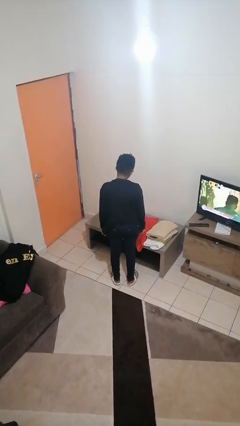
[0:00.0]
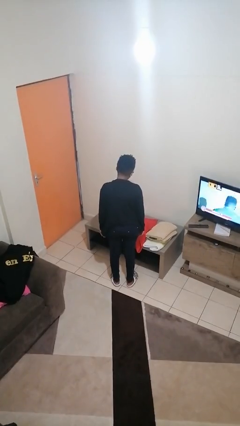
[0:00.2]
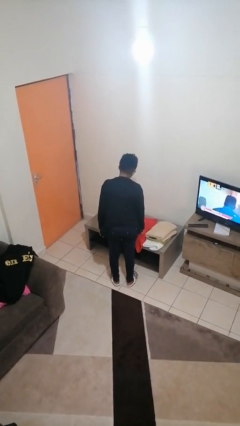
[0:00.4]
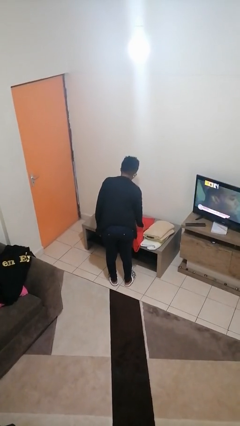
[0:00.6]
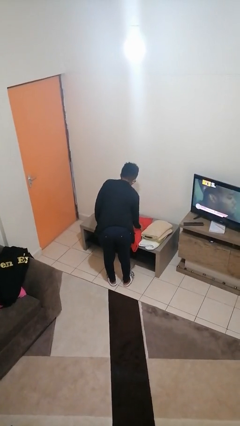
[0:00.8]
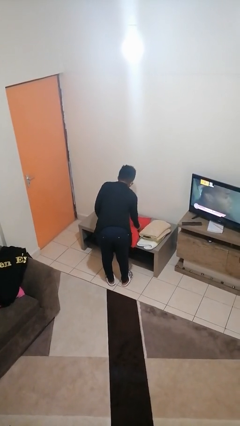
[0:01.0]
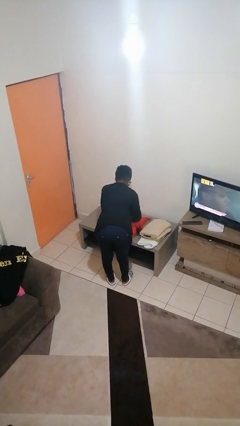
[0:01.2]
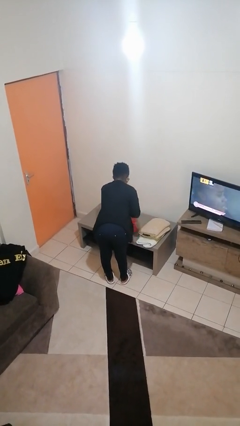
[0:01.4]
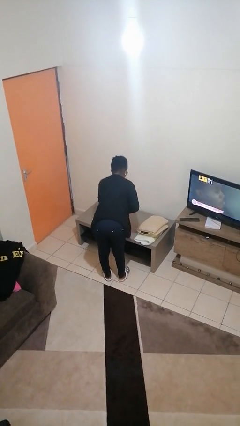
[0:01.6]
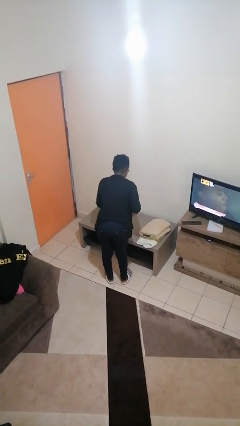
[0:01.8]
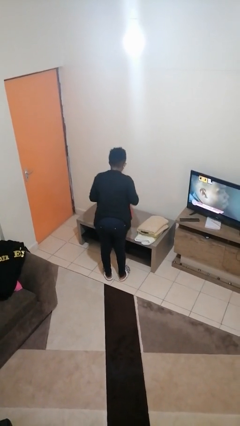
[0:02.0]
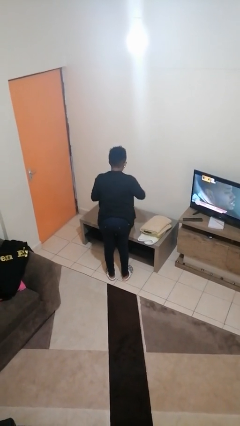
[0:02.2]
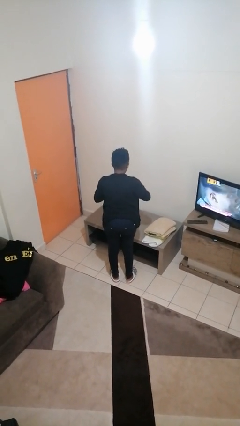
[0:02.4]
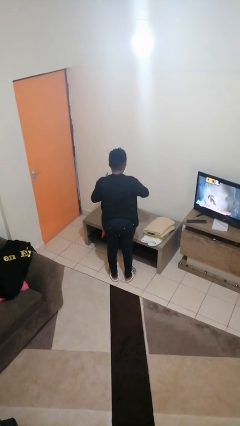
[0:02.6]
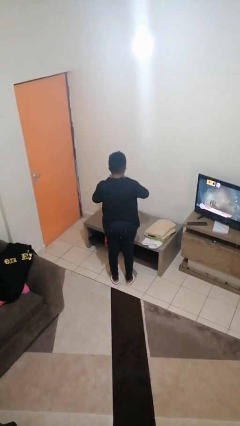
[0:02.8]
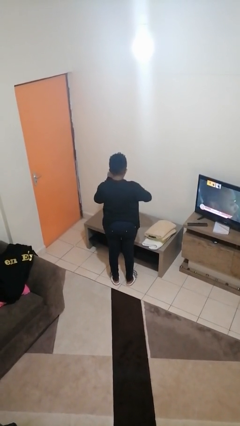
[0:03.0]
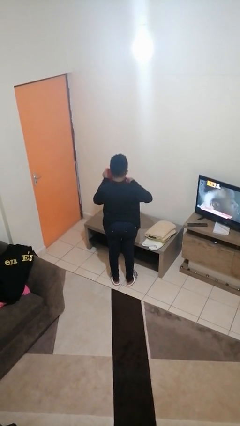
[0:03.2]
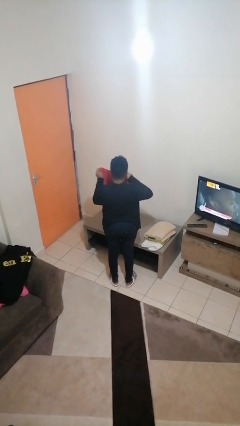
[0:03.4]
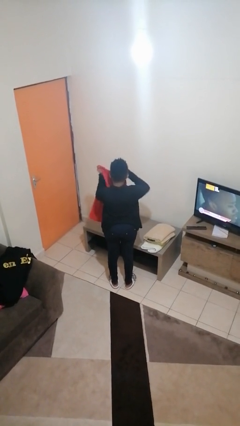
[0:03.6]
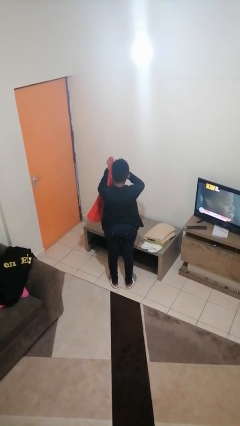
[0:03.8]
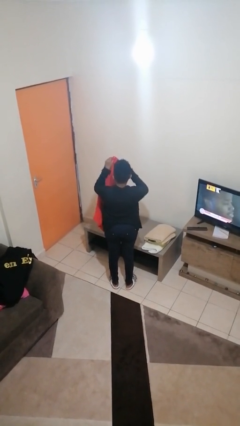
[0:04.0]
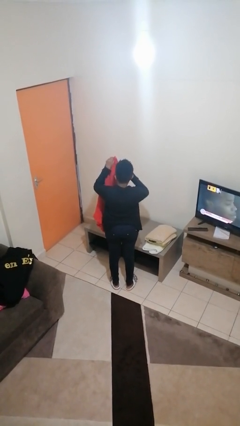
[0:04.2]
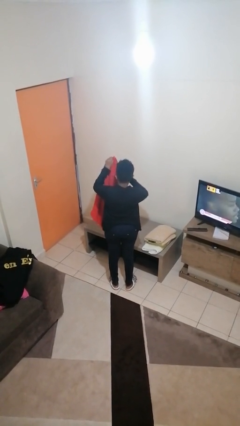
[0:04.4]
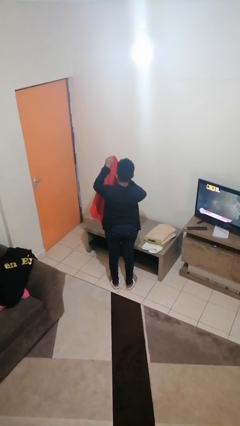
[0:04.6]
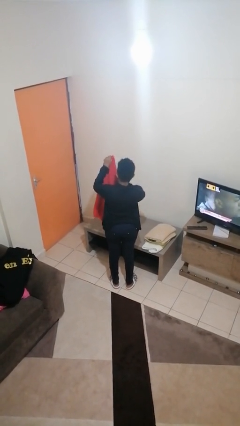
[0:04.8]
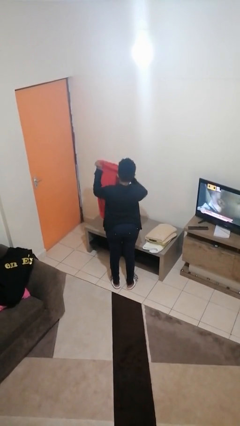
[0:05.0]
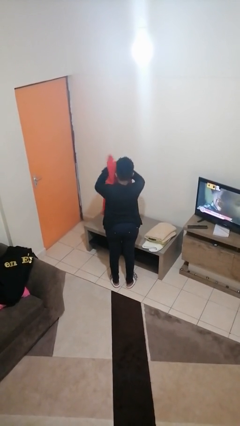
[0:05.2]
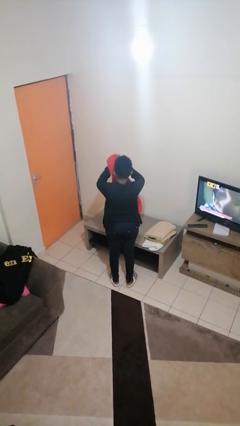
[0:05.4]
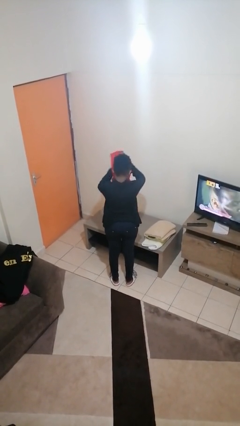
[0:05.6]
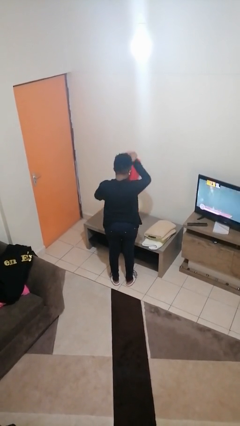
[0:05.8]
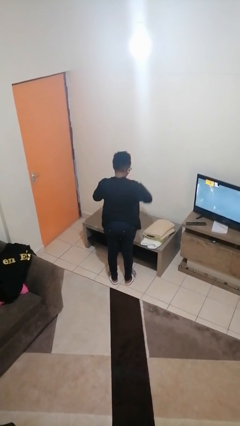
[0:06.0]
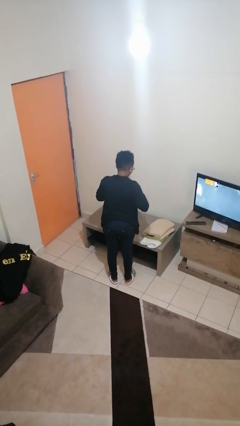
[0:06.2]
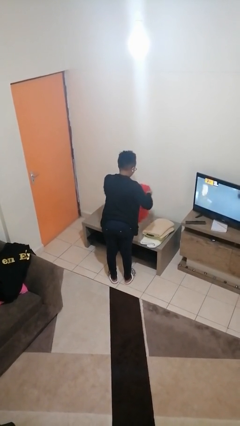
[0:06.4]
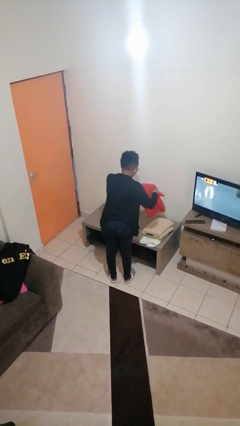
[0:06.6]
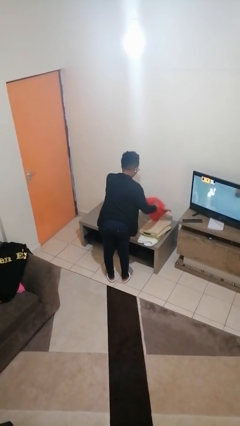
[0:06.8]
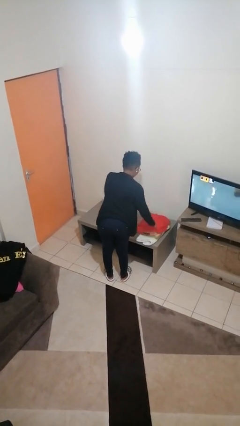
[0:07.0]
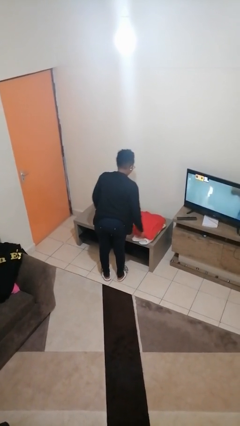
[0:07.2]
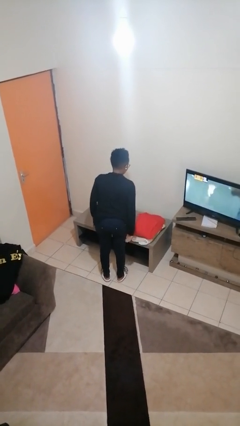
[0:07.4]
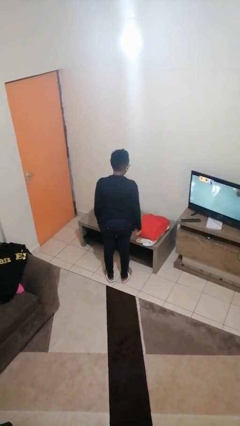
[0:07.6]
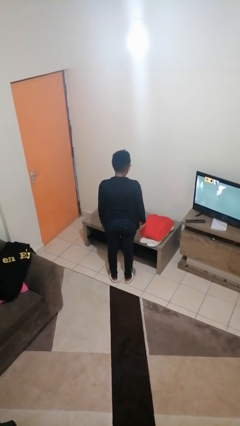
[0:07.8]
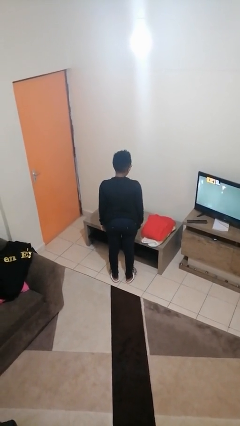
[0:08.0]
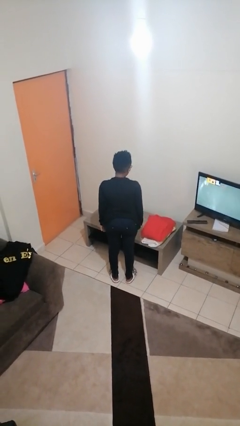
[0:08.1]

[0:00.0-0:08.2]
person folds towel

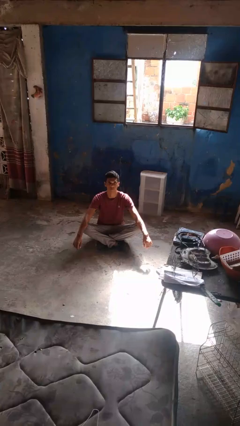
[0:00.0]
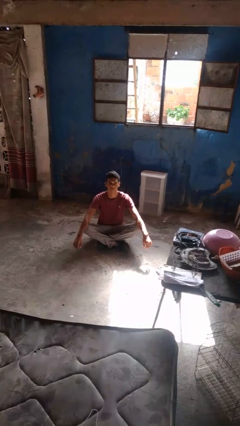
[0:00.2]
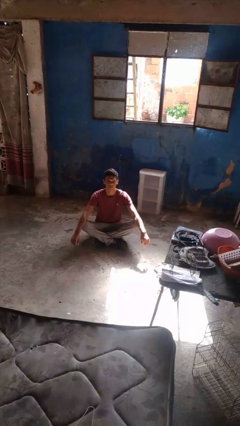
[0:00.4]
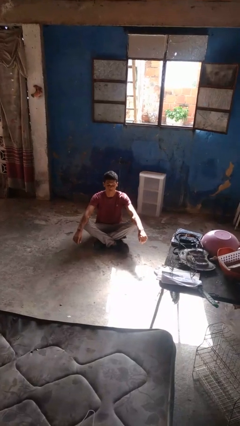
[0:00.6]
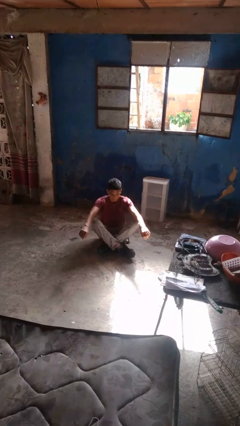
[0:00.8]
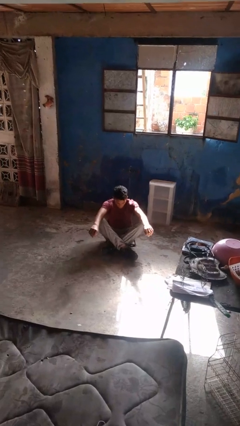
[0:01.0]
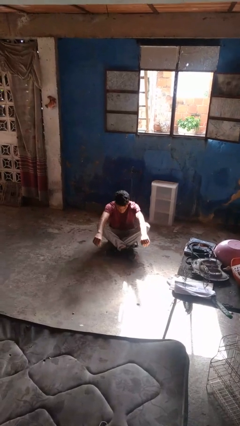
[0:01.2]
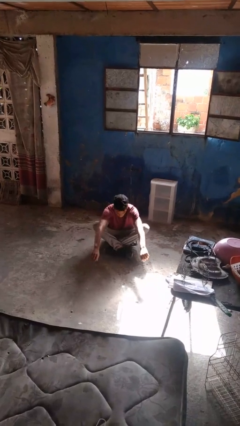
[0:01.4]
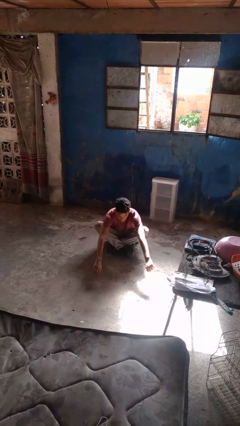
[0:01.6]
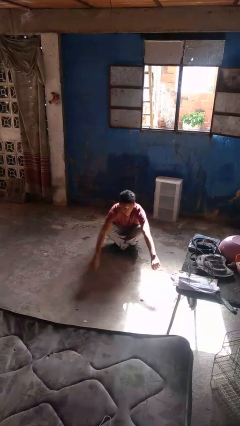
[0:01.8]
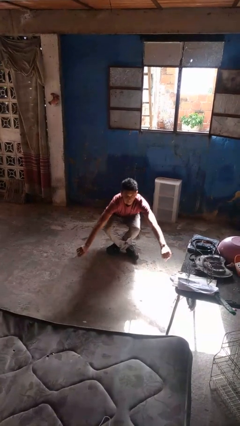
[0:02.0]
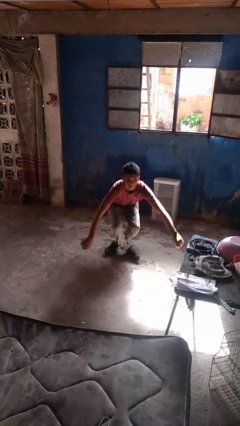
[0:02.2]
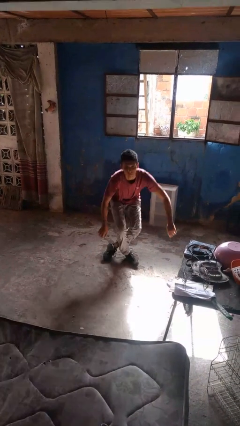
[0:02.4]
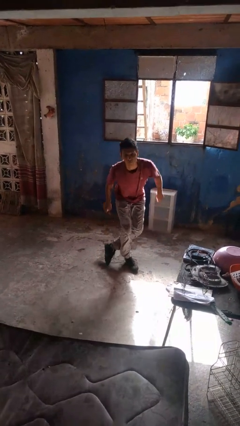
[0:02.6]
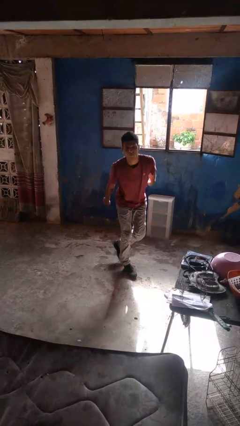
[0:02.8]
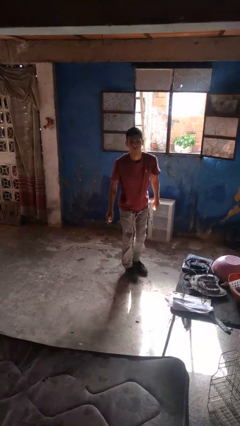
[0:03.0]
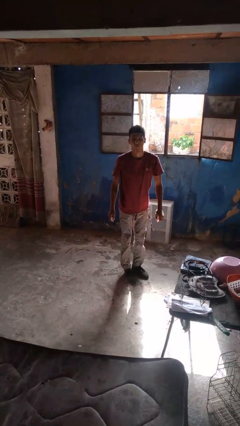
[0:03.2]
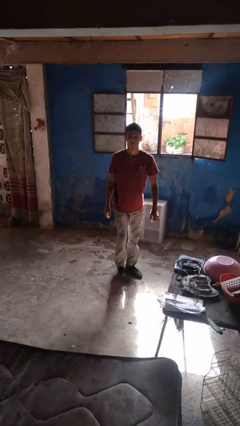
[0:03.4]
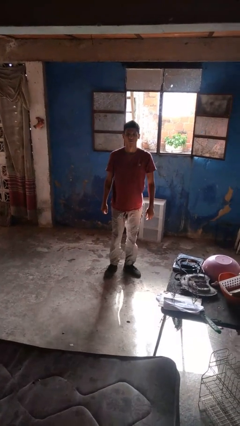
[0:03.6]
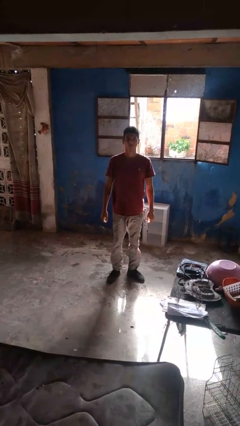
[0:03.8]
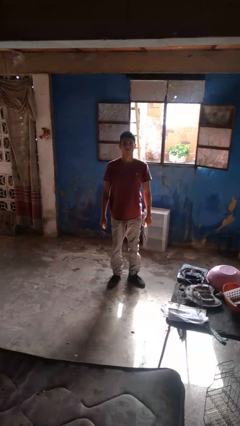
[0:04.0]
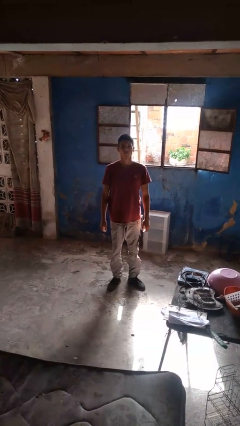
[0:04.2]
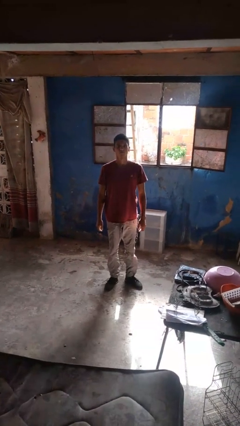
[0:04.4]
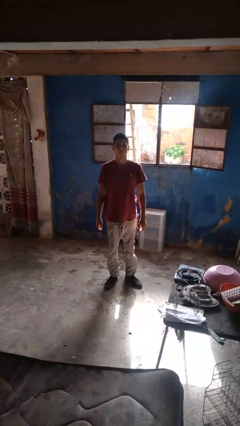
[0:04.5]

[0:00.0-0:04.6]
person stands up from floor

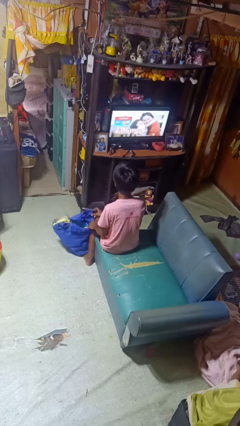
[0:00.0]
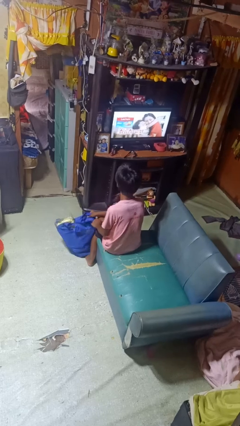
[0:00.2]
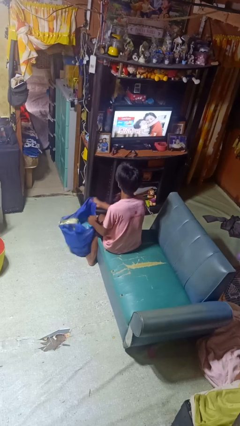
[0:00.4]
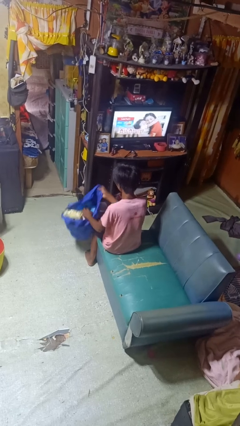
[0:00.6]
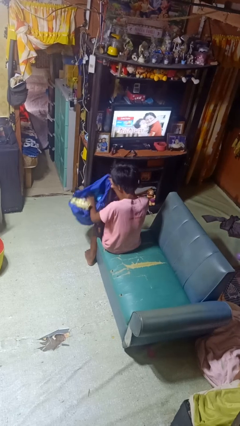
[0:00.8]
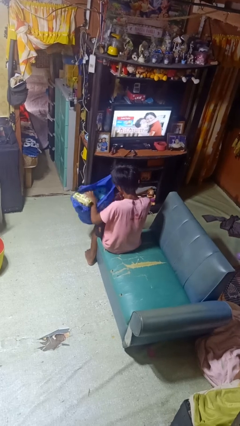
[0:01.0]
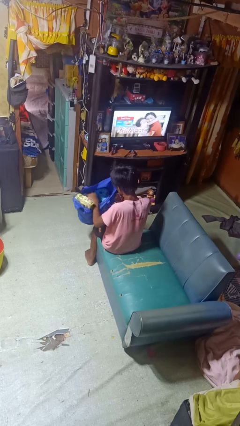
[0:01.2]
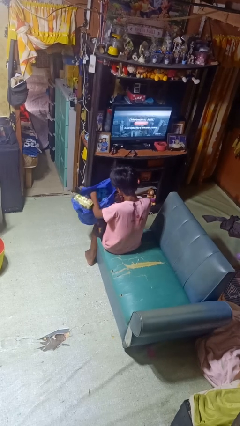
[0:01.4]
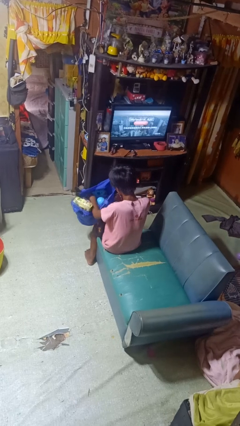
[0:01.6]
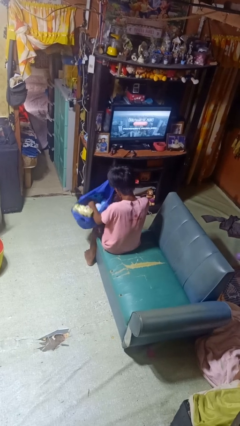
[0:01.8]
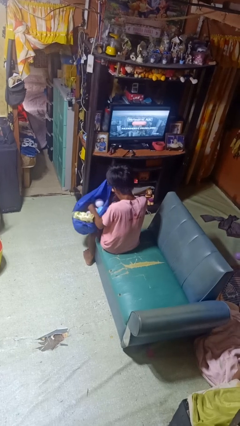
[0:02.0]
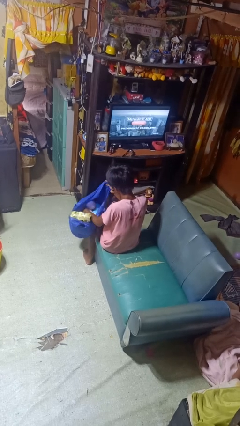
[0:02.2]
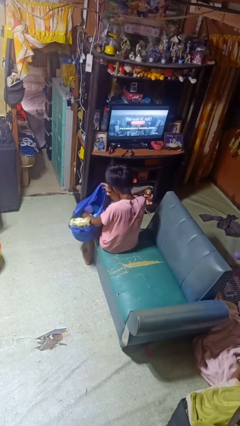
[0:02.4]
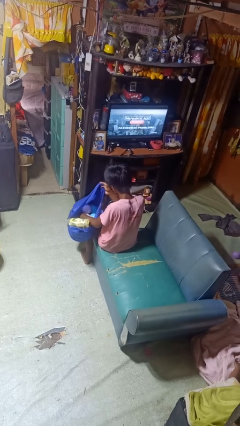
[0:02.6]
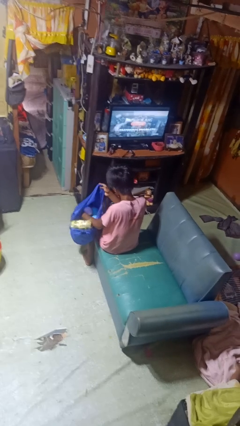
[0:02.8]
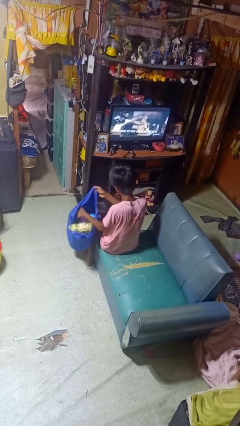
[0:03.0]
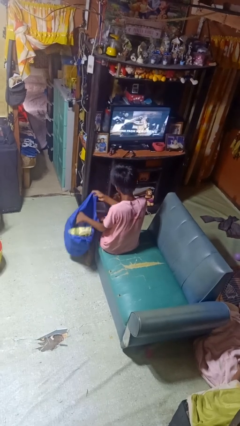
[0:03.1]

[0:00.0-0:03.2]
person searches in bag

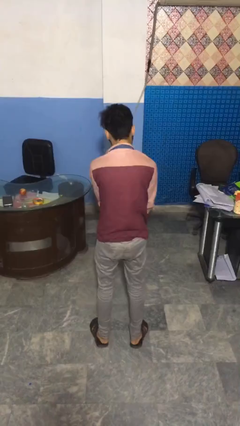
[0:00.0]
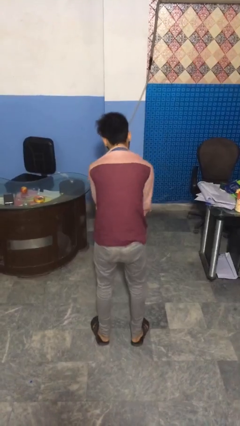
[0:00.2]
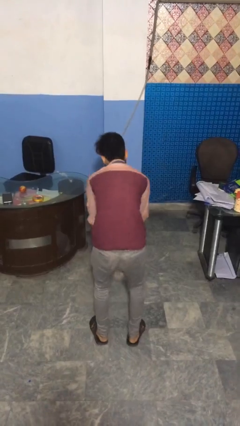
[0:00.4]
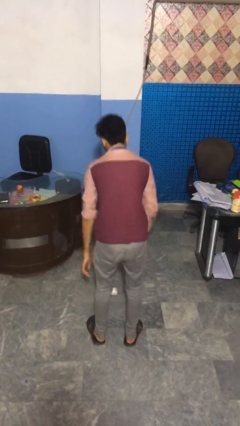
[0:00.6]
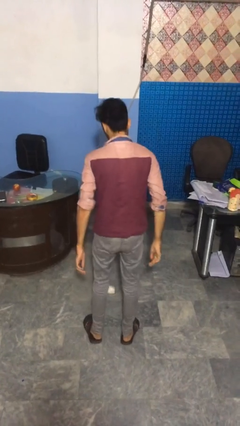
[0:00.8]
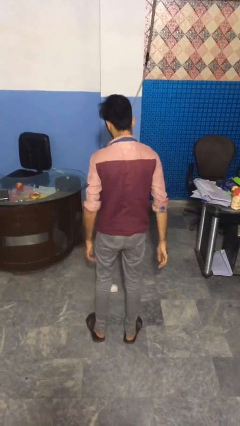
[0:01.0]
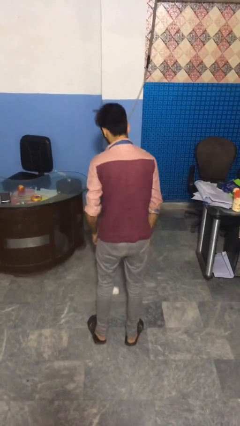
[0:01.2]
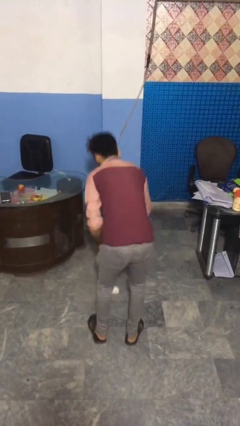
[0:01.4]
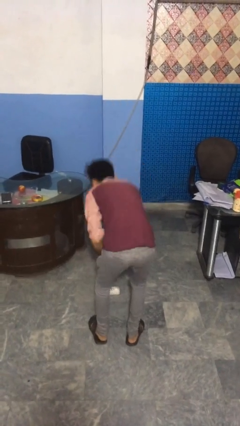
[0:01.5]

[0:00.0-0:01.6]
person catches dropped object

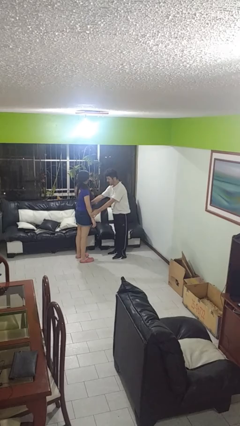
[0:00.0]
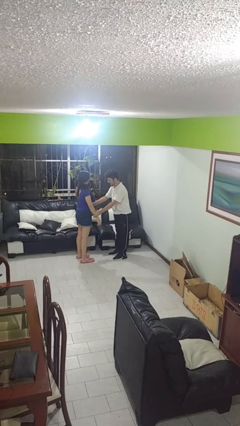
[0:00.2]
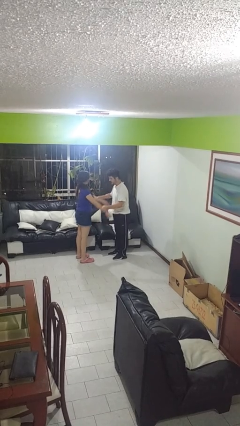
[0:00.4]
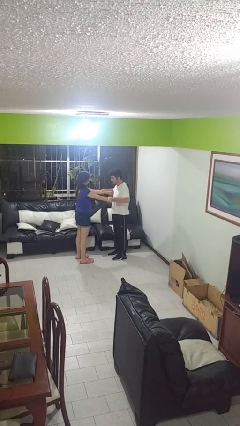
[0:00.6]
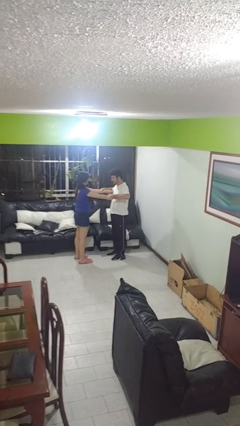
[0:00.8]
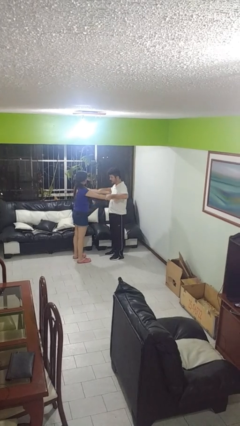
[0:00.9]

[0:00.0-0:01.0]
person grabs person by forearm
